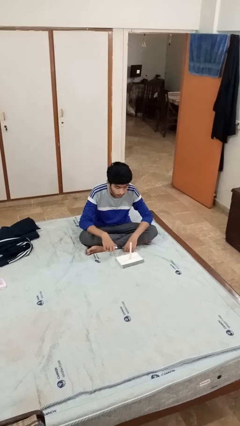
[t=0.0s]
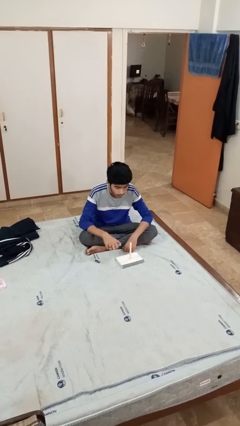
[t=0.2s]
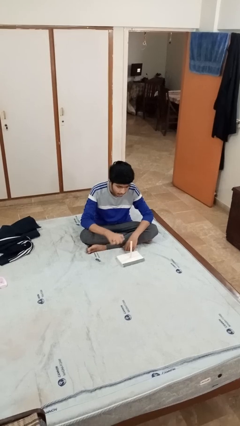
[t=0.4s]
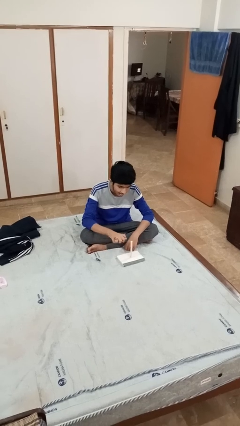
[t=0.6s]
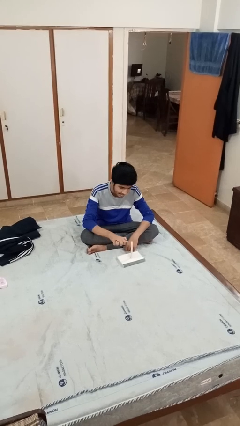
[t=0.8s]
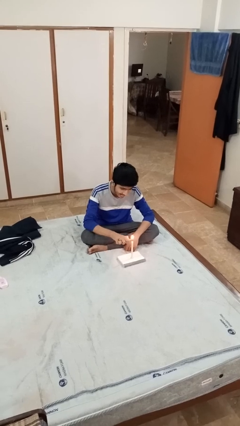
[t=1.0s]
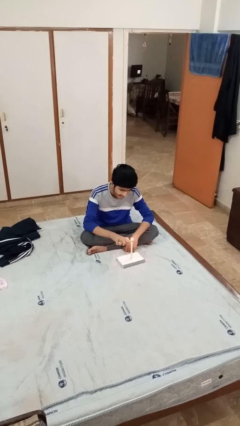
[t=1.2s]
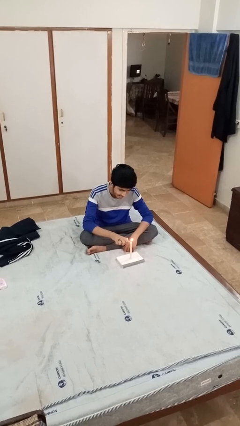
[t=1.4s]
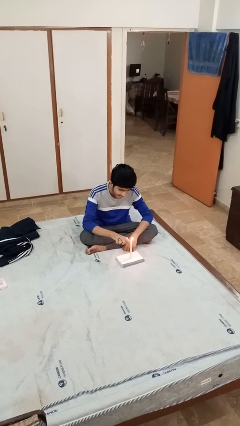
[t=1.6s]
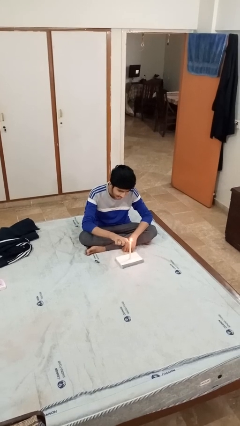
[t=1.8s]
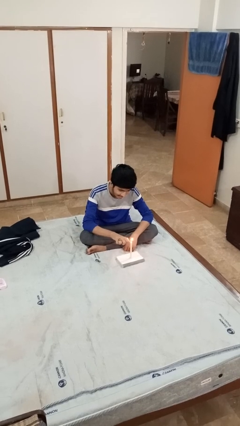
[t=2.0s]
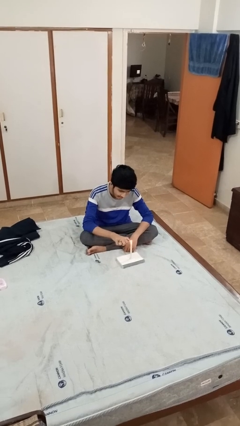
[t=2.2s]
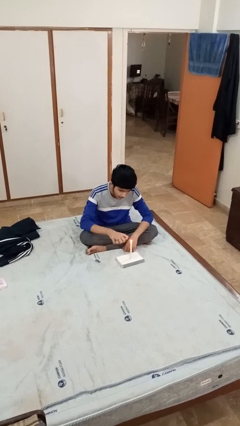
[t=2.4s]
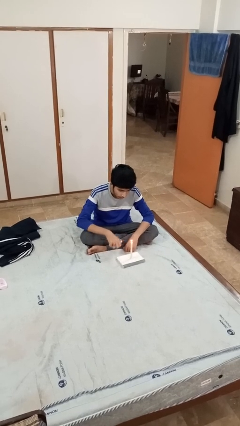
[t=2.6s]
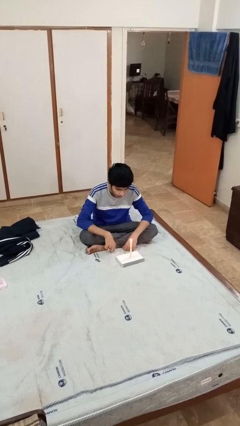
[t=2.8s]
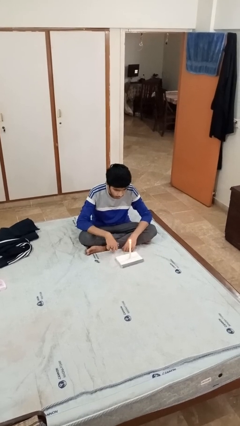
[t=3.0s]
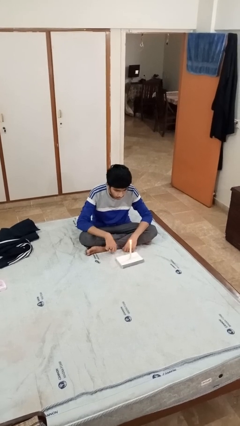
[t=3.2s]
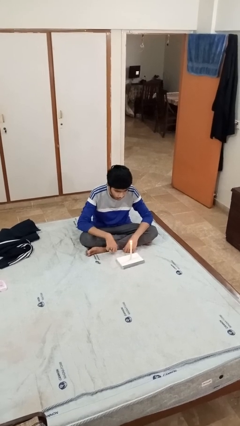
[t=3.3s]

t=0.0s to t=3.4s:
person lights candle

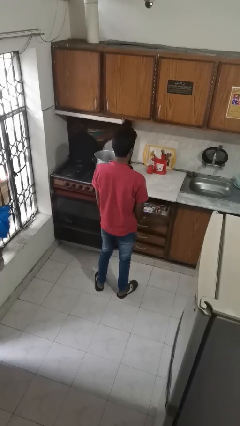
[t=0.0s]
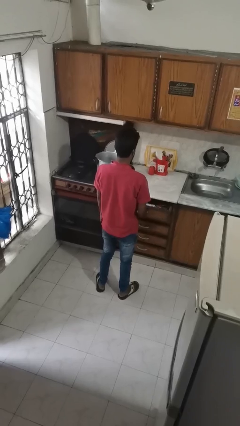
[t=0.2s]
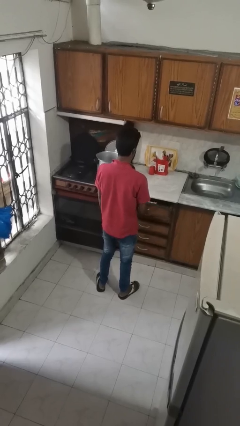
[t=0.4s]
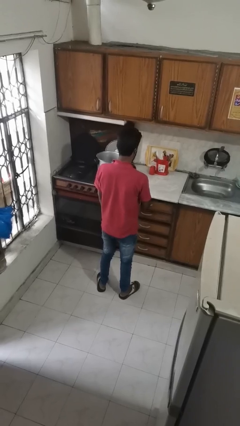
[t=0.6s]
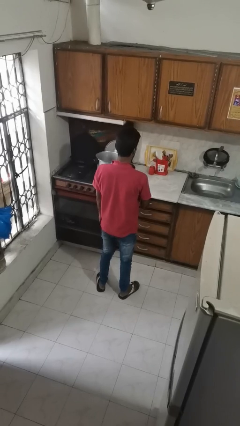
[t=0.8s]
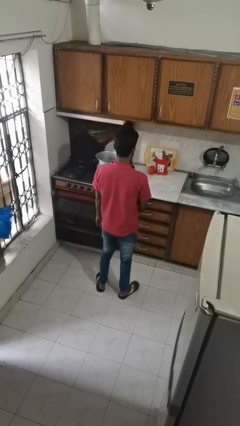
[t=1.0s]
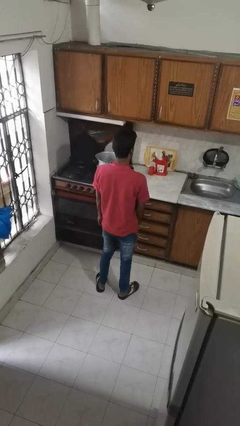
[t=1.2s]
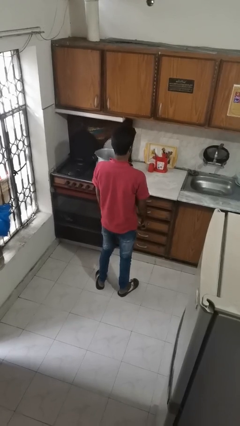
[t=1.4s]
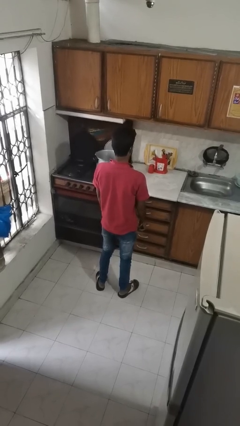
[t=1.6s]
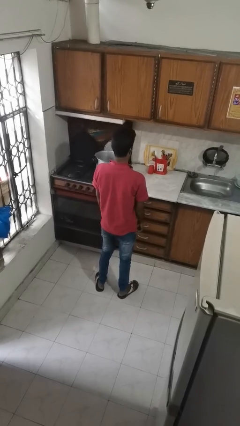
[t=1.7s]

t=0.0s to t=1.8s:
person closes kitchen drawer

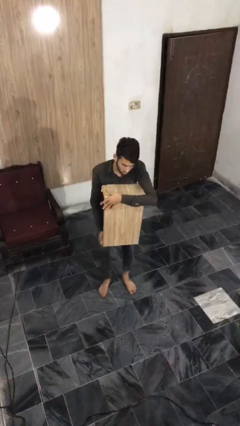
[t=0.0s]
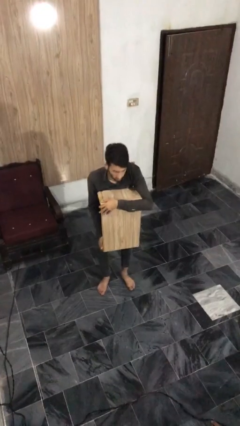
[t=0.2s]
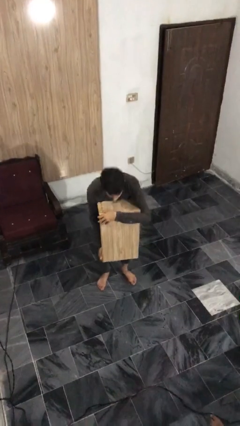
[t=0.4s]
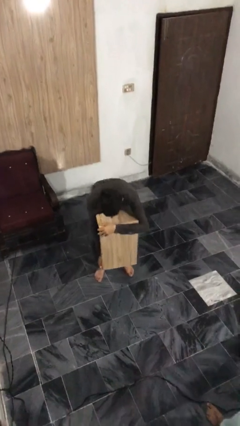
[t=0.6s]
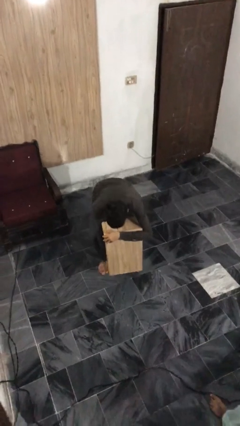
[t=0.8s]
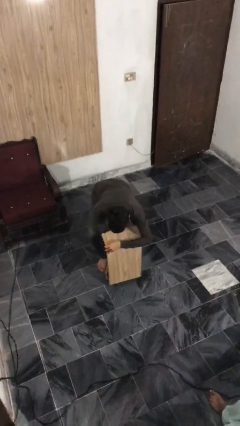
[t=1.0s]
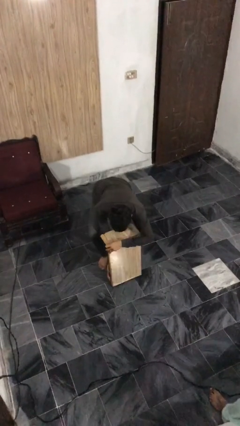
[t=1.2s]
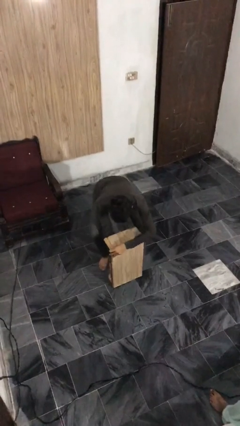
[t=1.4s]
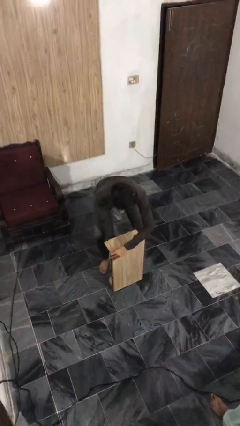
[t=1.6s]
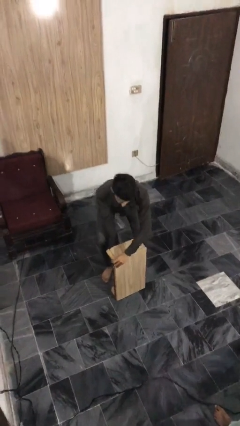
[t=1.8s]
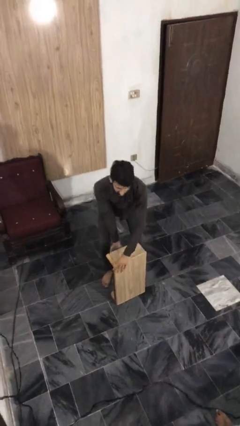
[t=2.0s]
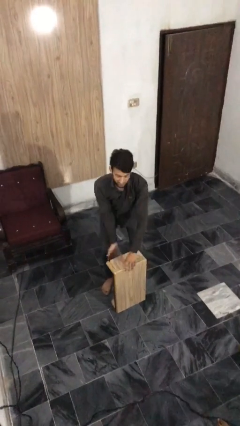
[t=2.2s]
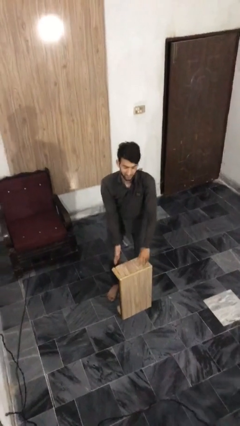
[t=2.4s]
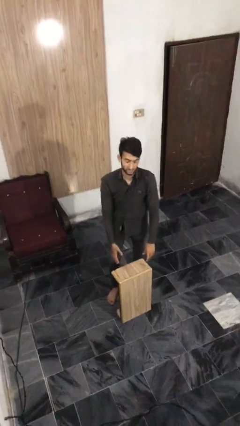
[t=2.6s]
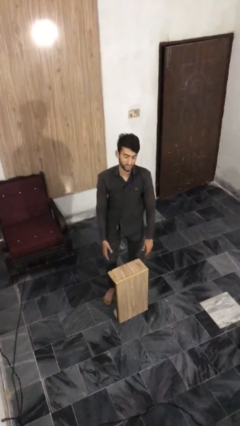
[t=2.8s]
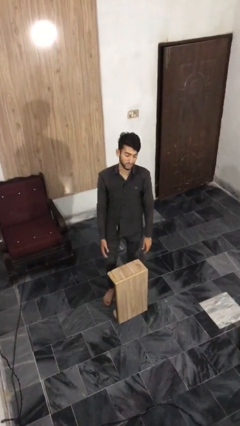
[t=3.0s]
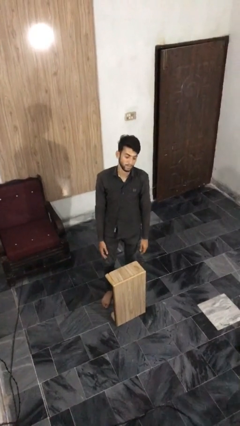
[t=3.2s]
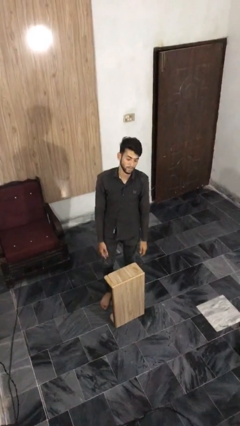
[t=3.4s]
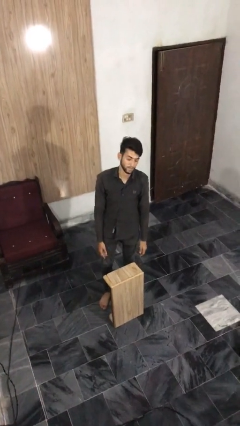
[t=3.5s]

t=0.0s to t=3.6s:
person puts down object on floor

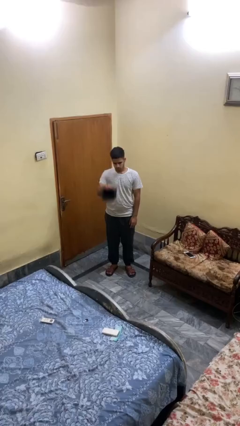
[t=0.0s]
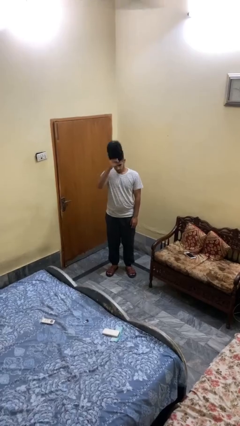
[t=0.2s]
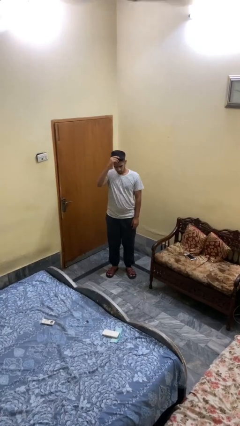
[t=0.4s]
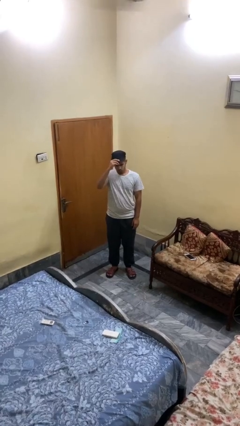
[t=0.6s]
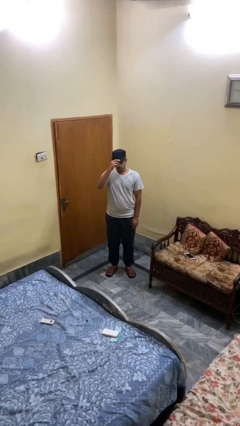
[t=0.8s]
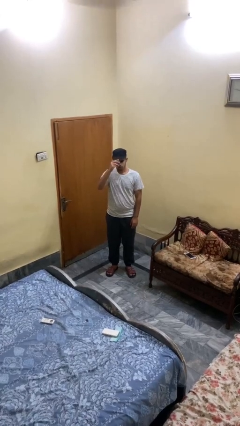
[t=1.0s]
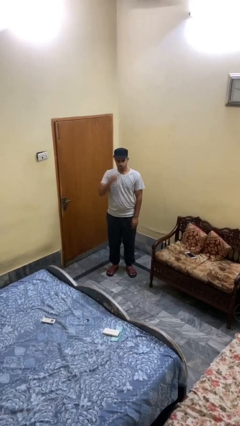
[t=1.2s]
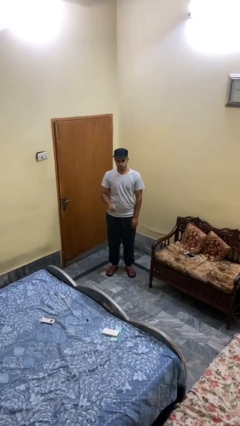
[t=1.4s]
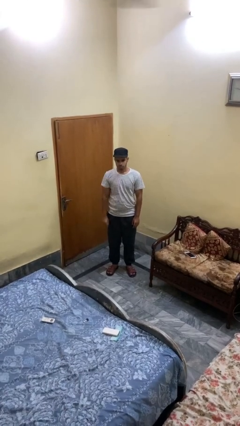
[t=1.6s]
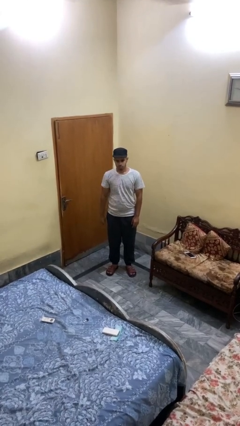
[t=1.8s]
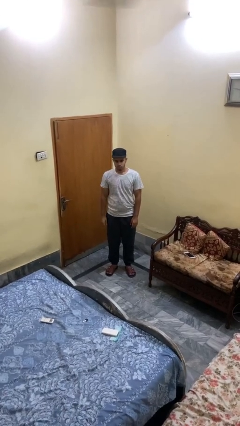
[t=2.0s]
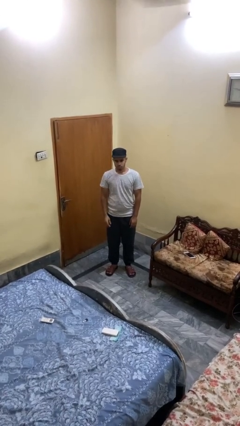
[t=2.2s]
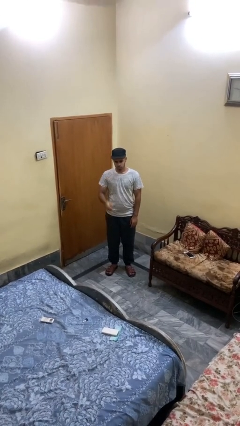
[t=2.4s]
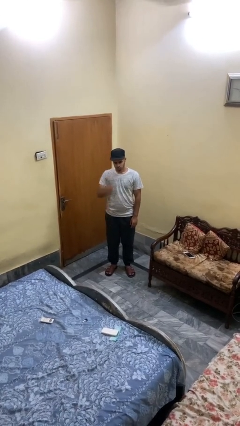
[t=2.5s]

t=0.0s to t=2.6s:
person puts on hat

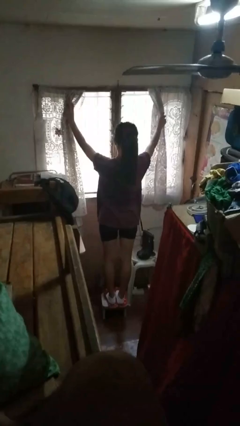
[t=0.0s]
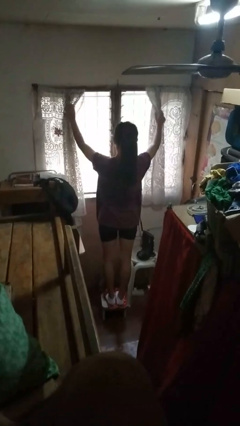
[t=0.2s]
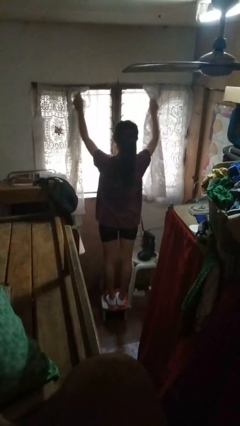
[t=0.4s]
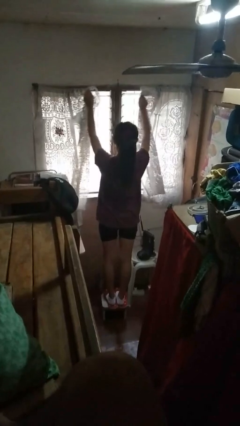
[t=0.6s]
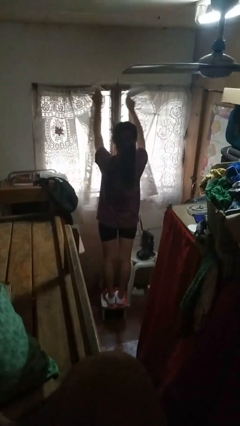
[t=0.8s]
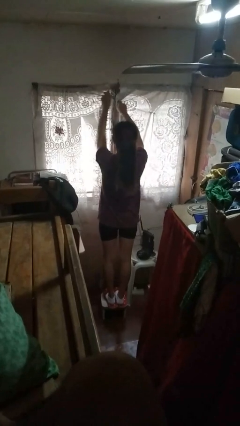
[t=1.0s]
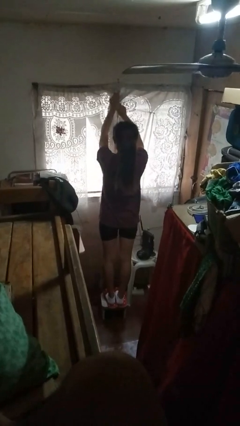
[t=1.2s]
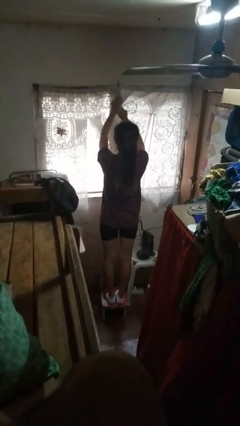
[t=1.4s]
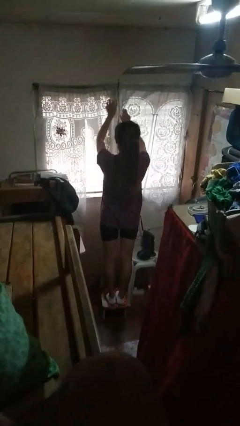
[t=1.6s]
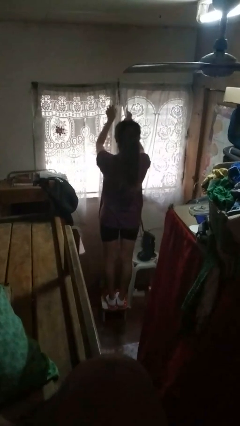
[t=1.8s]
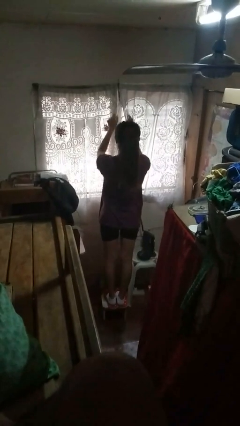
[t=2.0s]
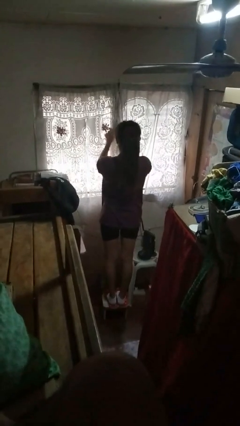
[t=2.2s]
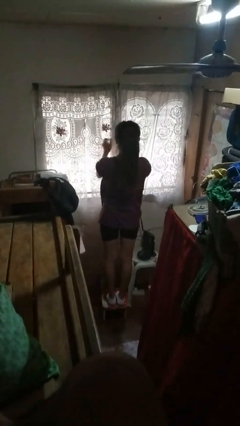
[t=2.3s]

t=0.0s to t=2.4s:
person closes curtains

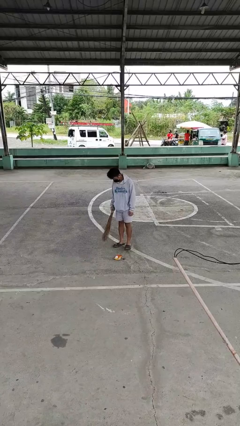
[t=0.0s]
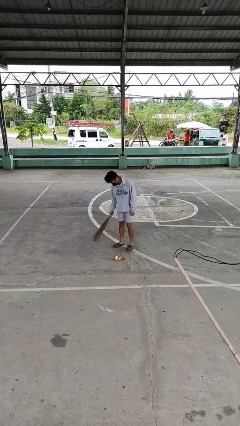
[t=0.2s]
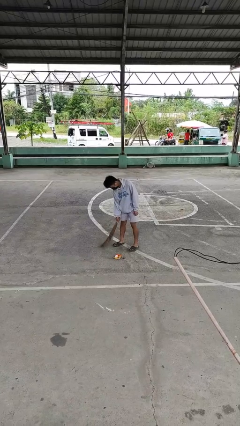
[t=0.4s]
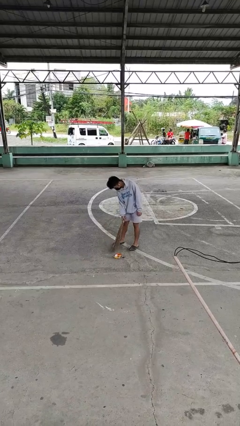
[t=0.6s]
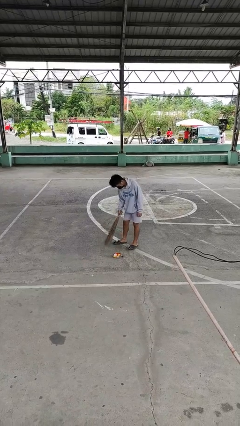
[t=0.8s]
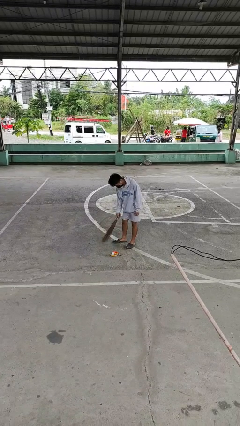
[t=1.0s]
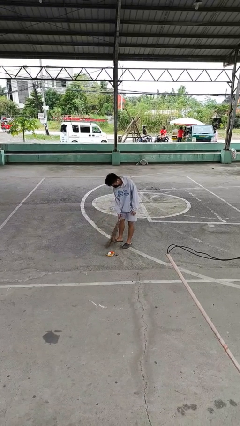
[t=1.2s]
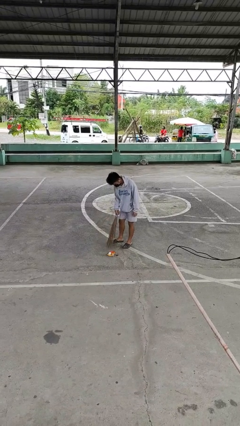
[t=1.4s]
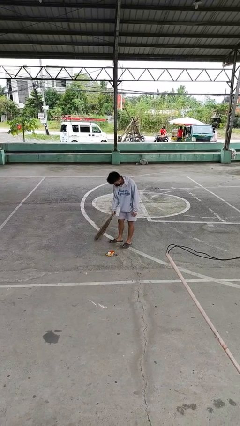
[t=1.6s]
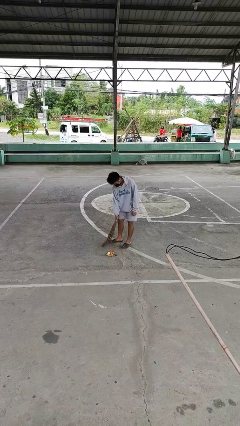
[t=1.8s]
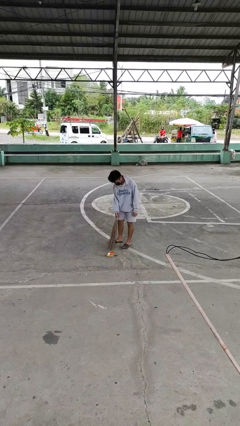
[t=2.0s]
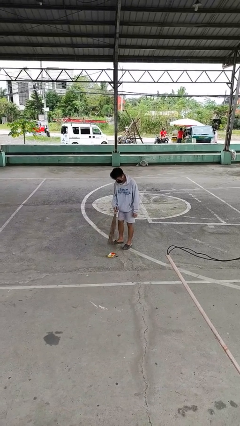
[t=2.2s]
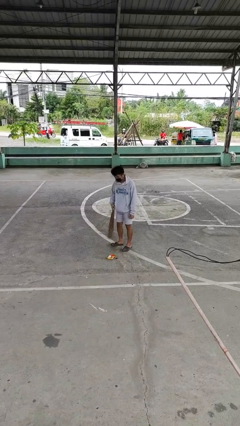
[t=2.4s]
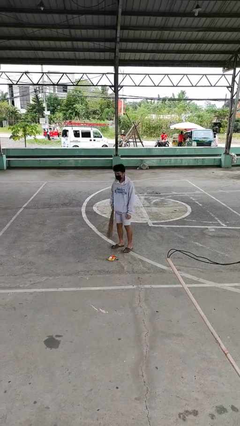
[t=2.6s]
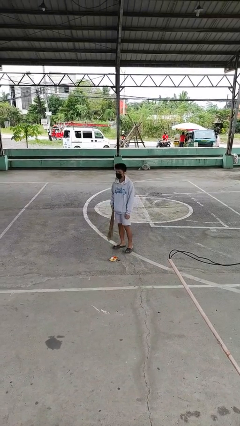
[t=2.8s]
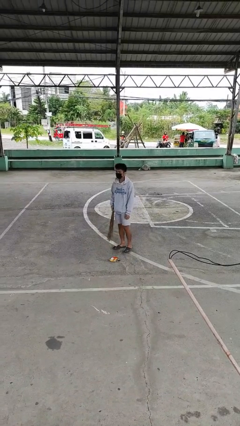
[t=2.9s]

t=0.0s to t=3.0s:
person sweeps floor

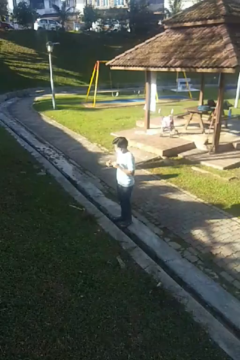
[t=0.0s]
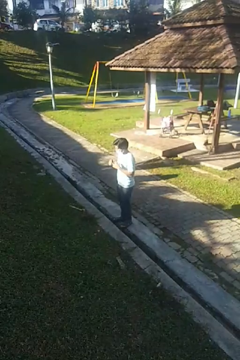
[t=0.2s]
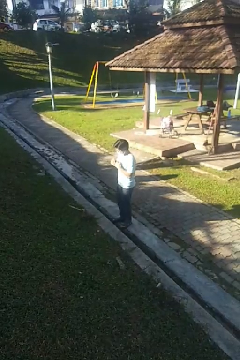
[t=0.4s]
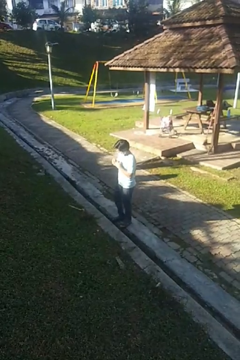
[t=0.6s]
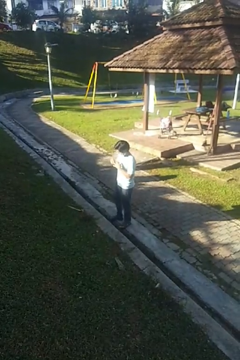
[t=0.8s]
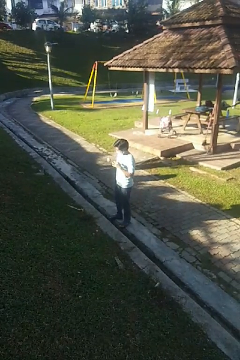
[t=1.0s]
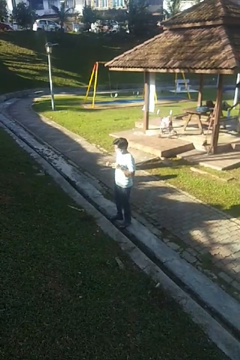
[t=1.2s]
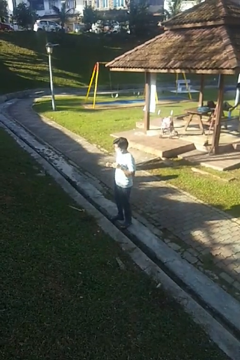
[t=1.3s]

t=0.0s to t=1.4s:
person takes off ring
